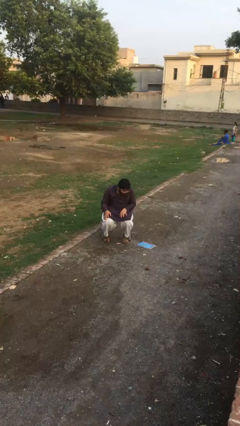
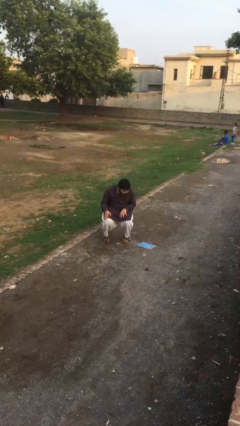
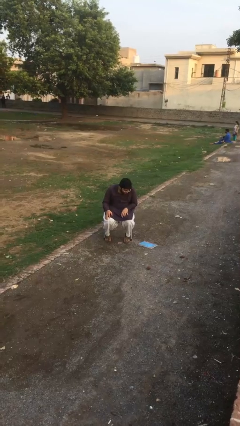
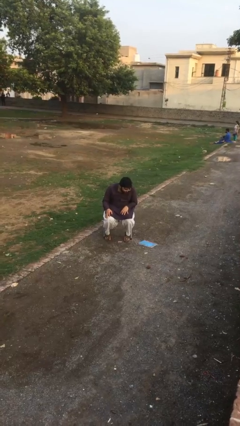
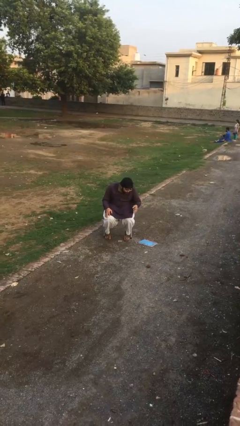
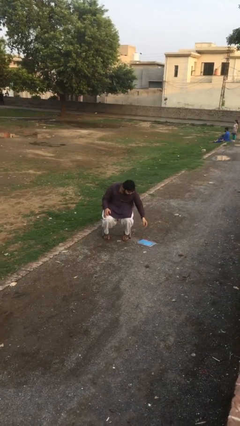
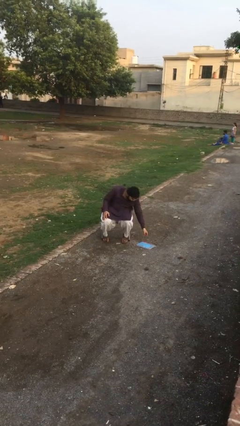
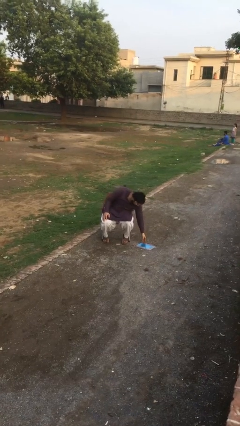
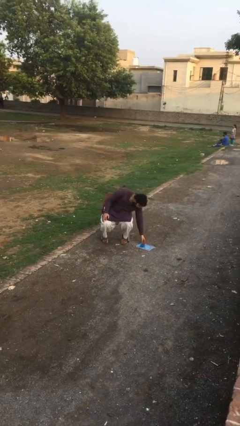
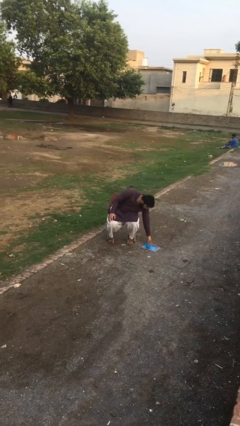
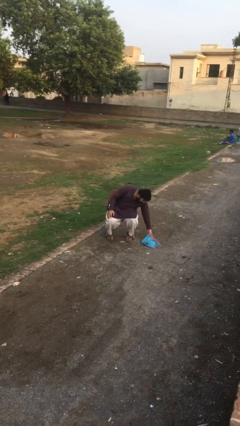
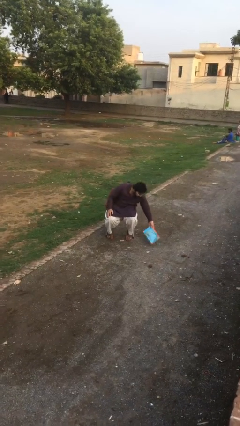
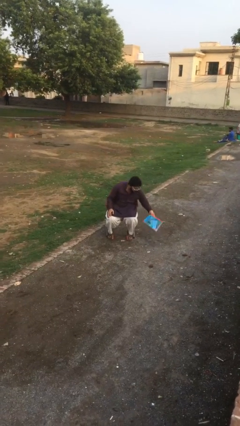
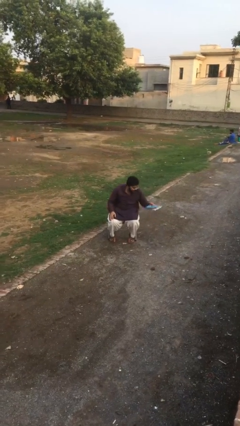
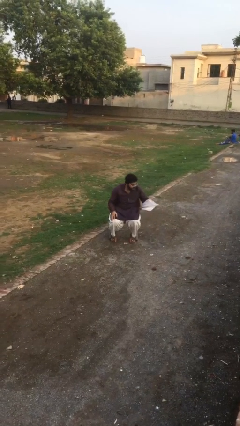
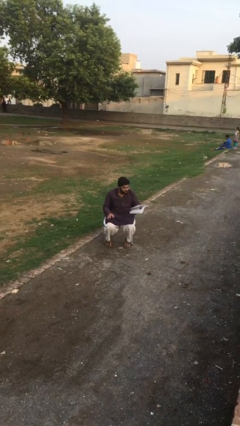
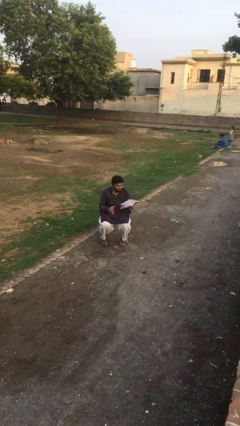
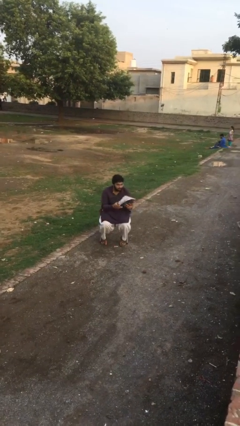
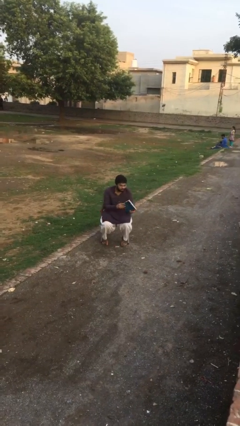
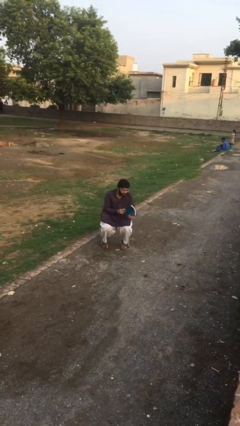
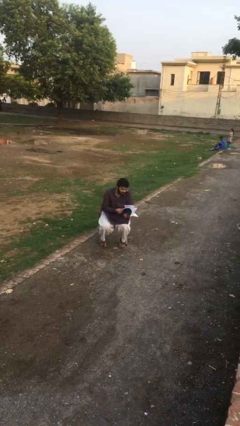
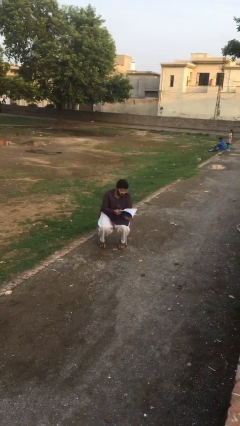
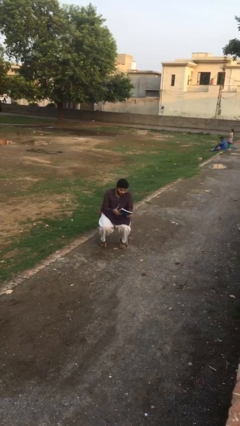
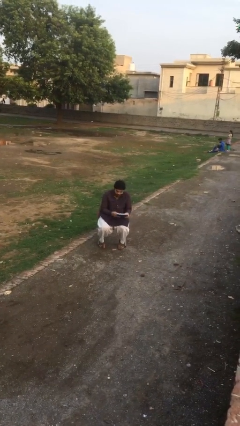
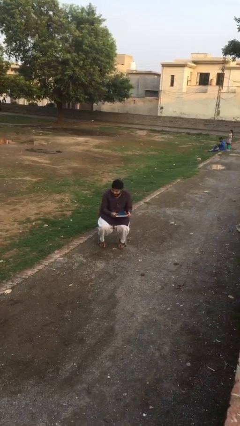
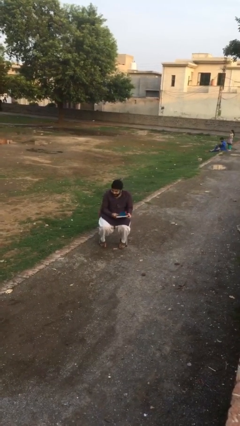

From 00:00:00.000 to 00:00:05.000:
person picks up object from floor

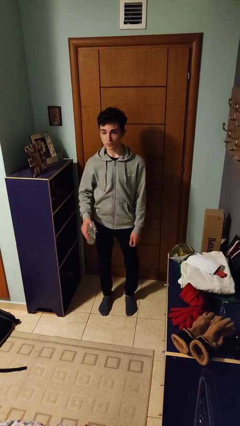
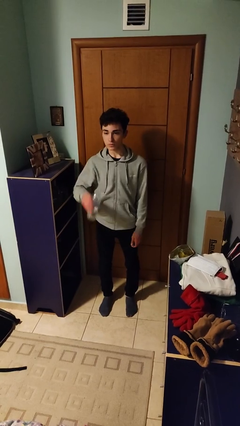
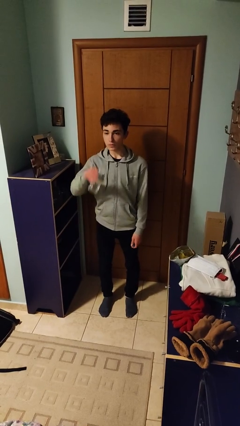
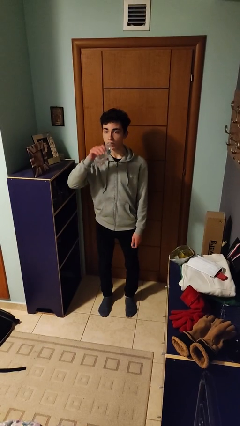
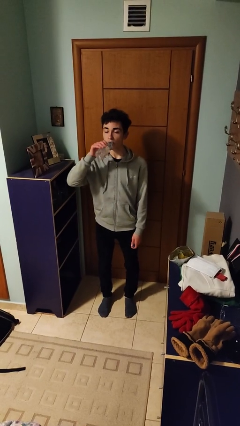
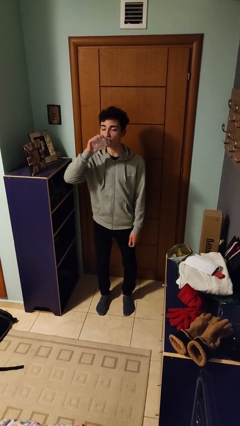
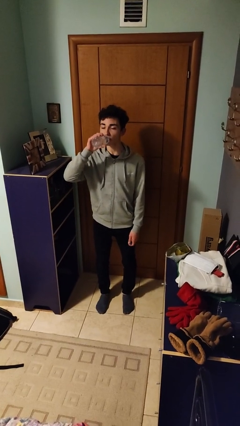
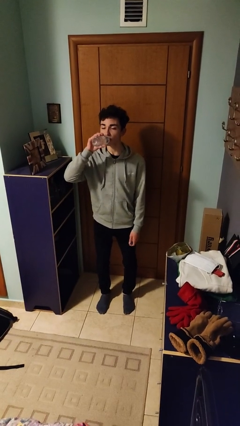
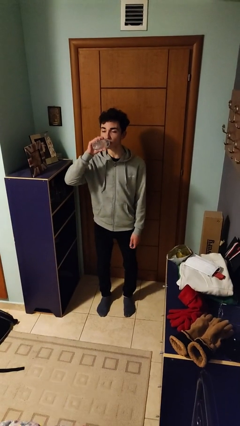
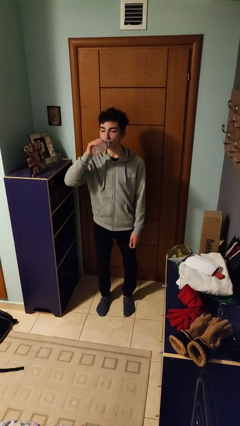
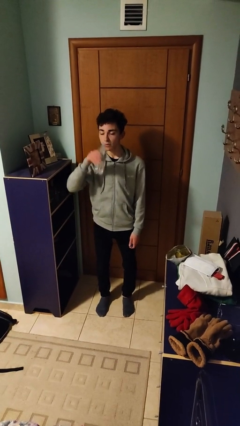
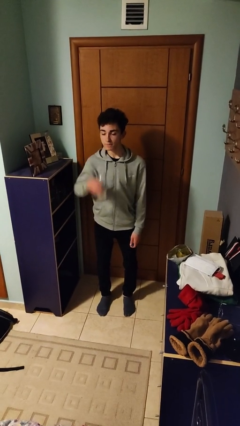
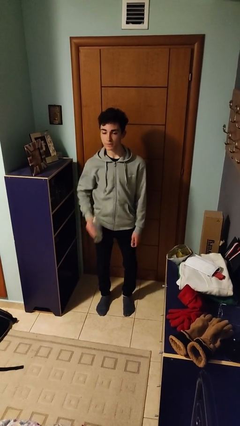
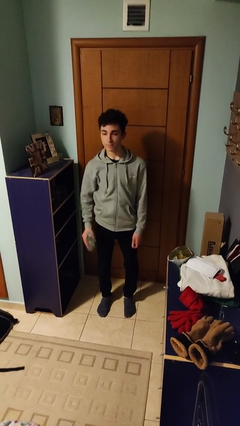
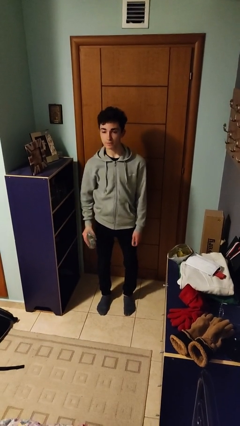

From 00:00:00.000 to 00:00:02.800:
person drinks from bottle

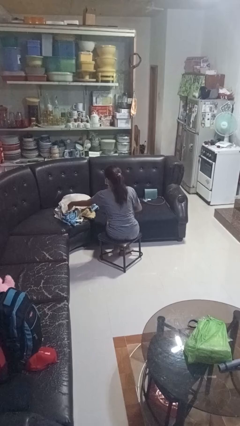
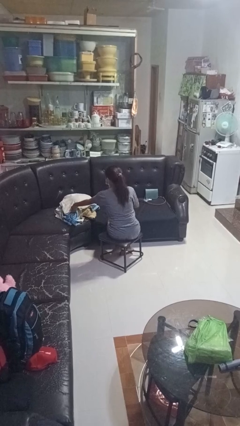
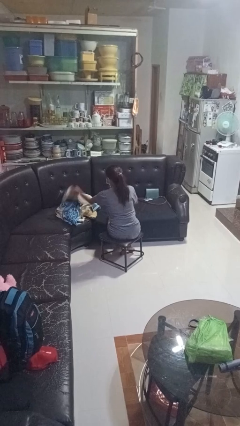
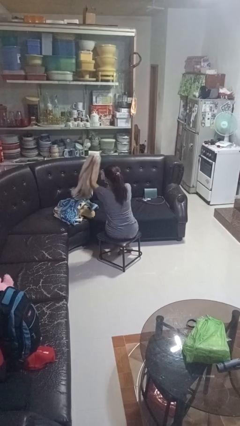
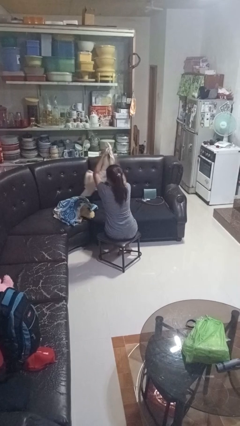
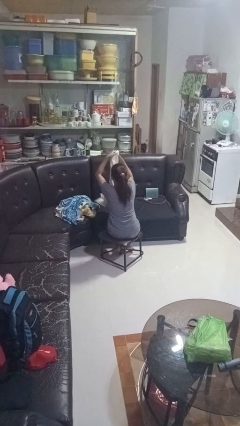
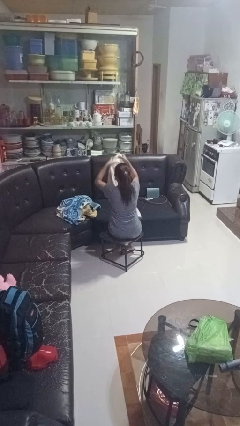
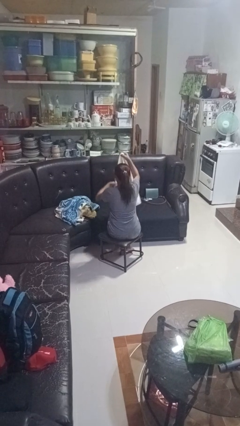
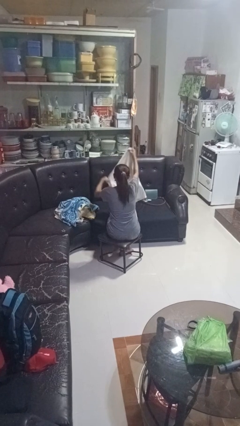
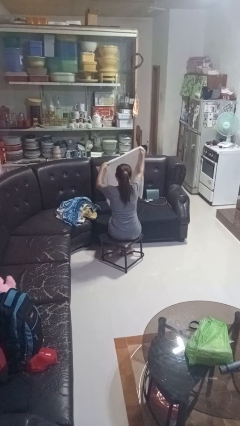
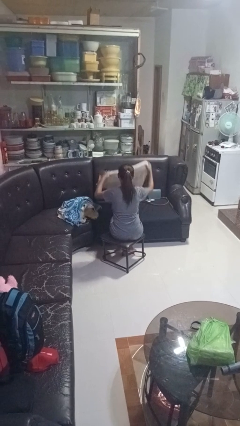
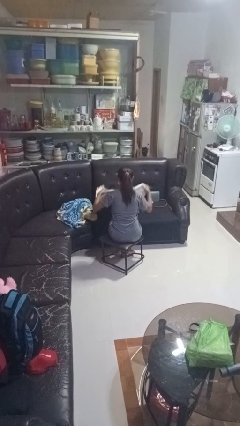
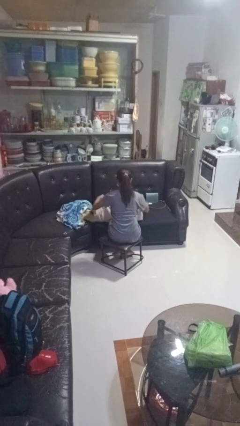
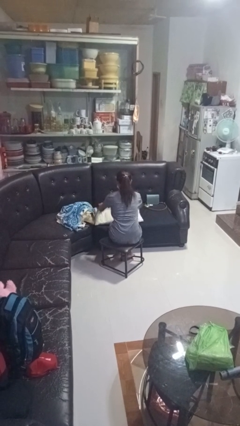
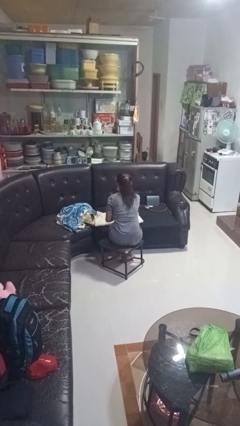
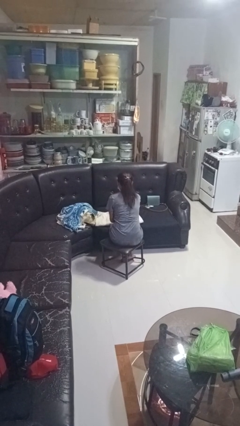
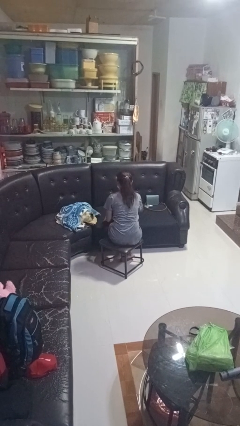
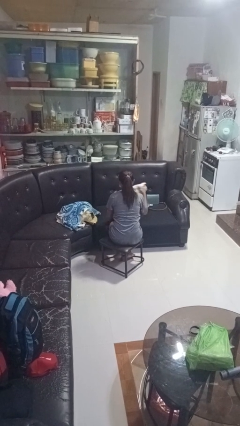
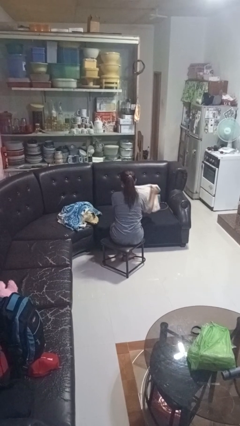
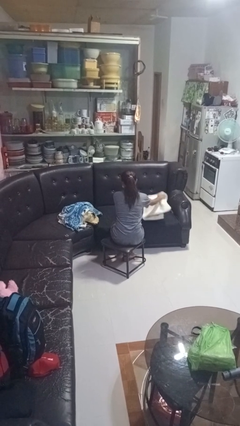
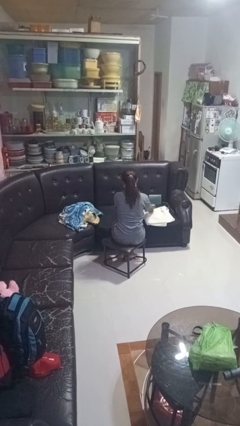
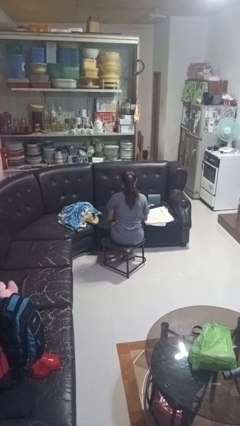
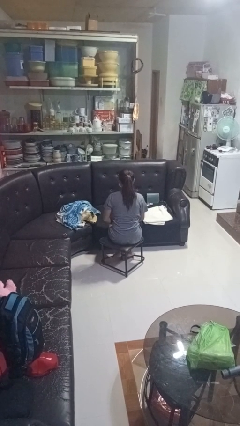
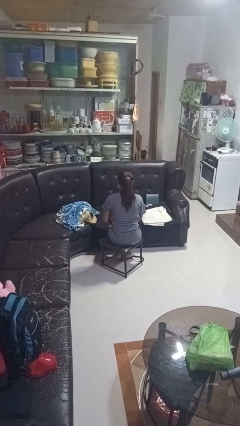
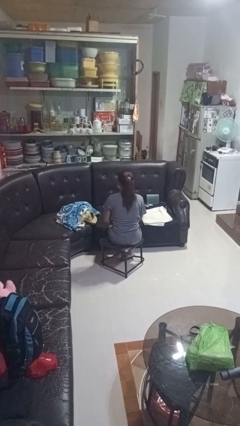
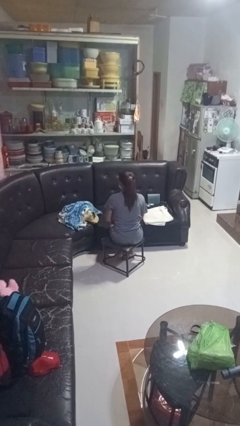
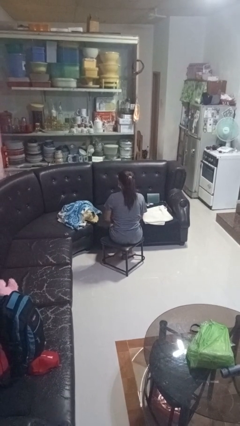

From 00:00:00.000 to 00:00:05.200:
person folds towel

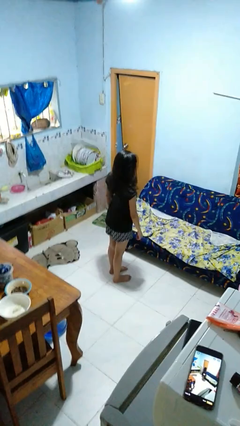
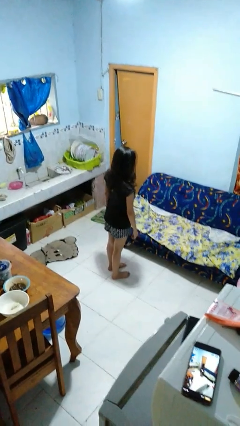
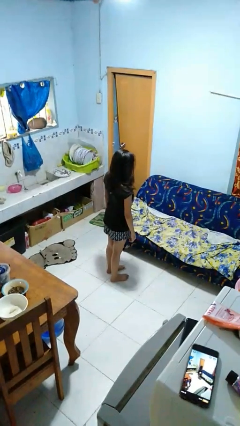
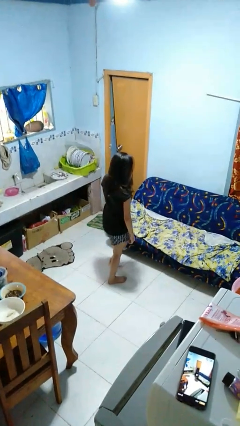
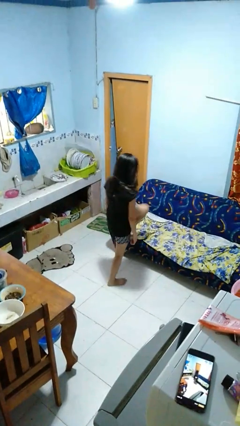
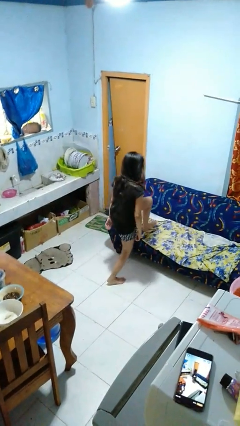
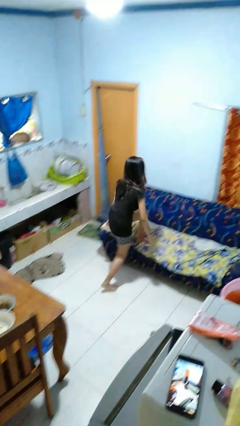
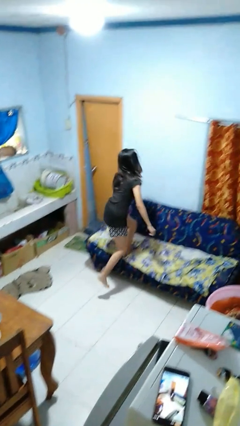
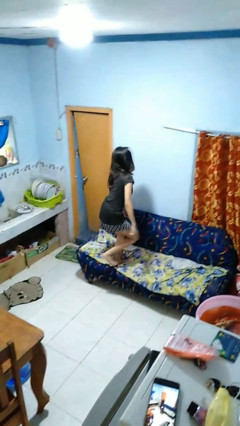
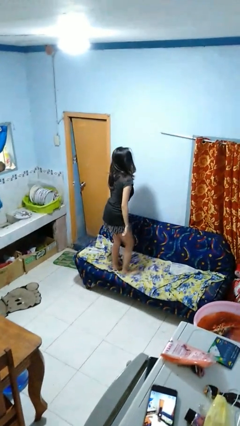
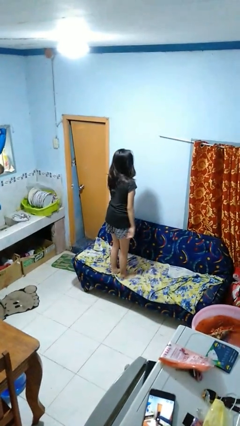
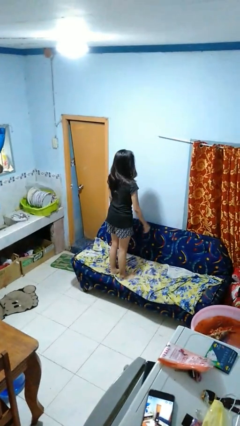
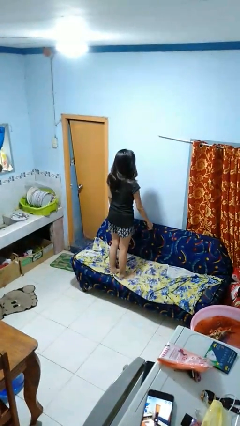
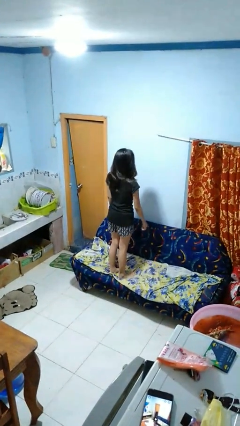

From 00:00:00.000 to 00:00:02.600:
person climbs on couch

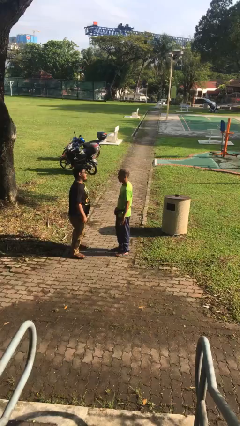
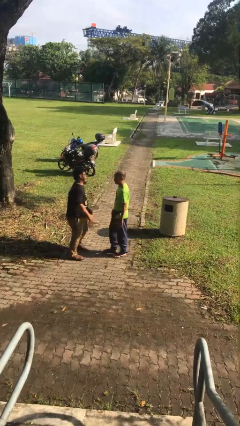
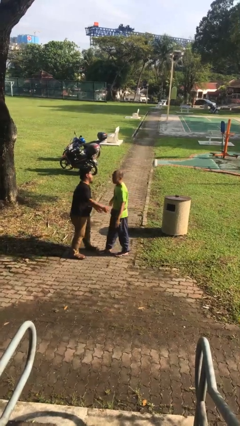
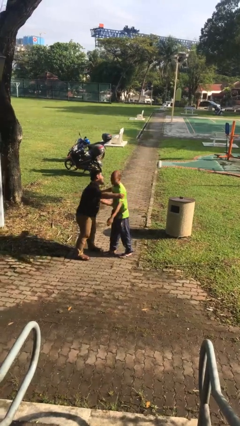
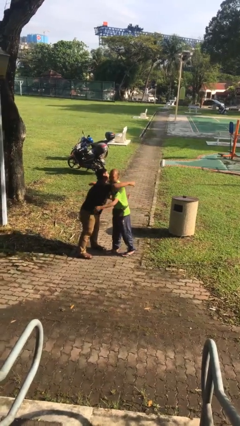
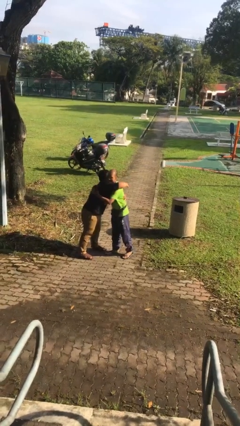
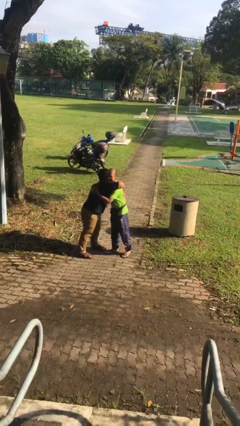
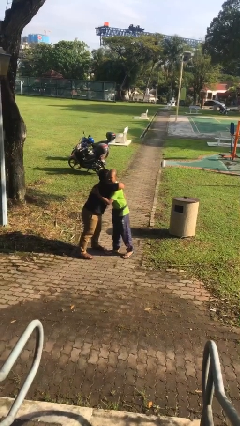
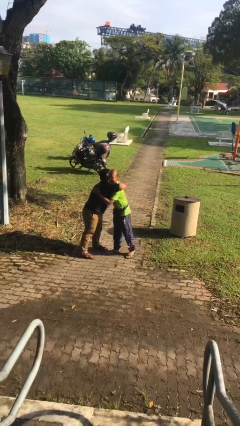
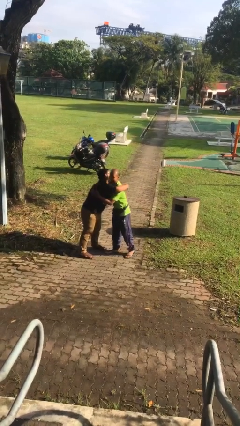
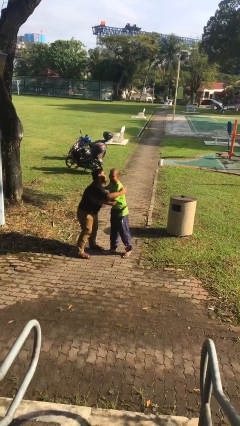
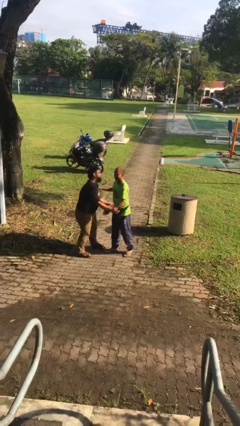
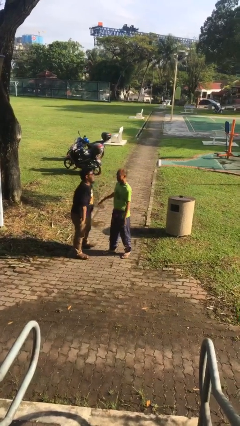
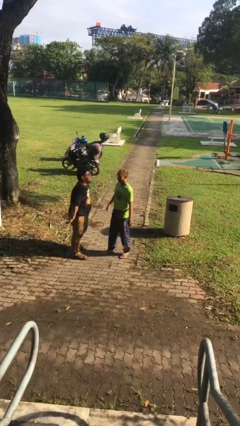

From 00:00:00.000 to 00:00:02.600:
person embraces person
